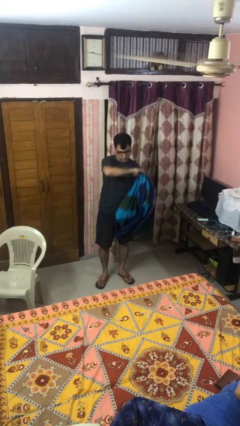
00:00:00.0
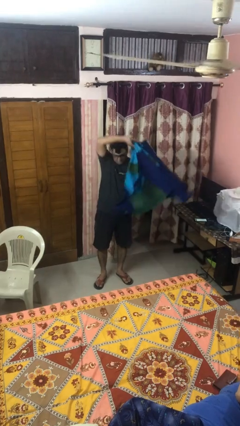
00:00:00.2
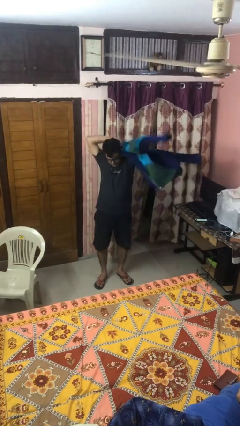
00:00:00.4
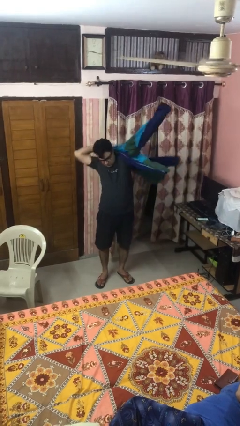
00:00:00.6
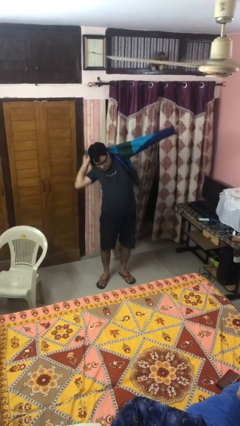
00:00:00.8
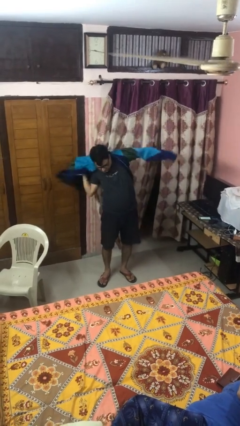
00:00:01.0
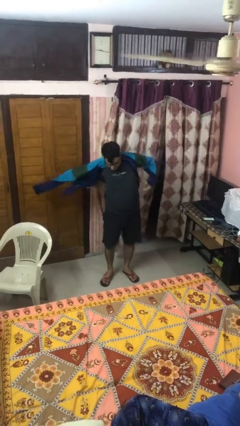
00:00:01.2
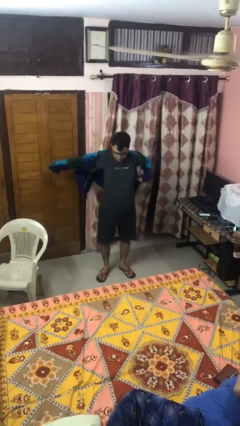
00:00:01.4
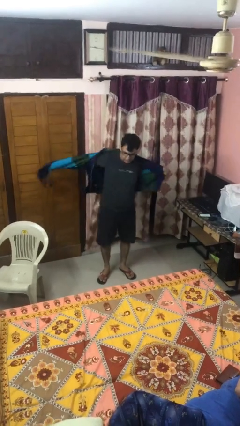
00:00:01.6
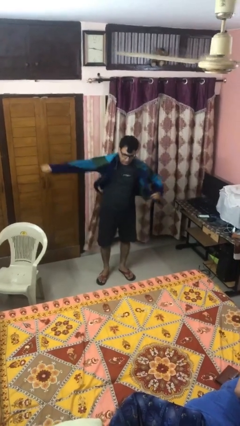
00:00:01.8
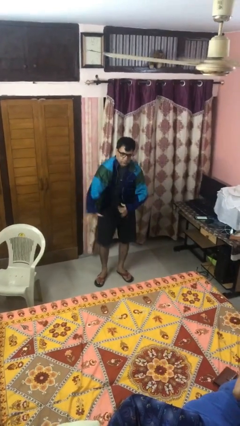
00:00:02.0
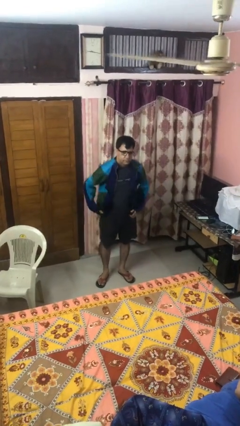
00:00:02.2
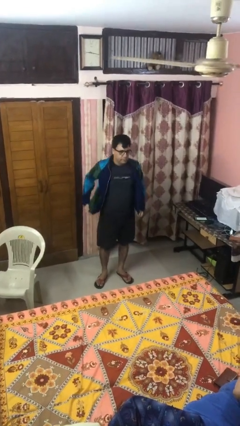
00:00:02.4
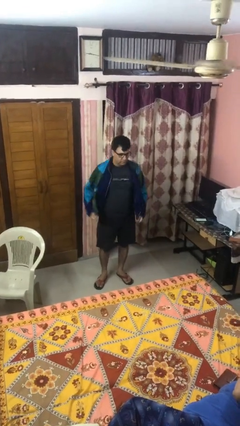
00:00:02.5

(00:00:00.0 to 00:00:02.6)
person puts on jacket

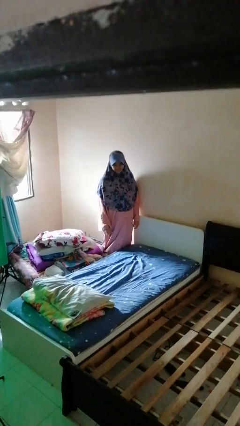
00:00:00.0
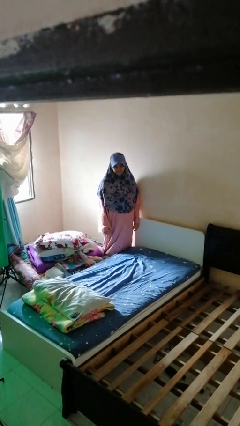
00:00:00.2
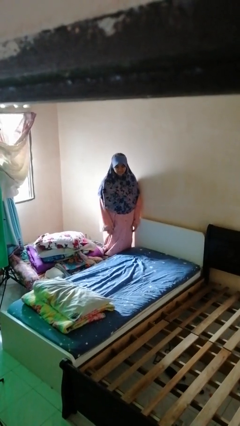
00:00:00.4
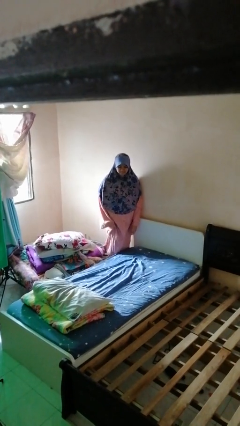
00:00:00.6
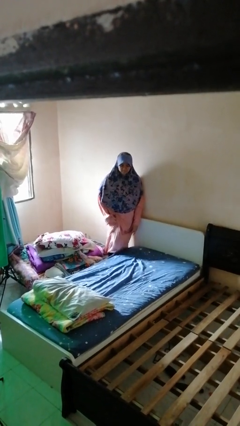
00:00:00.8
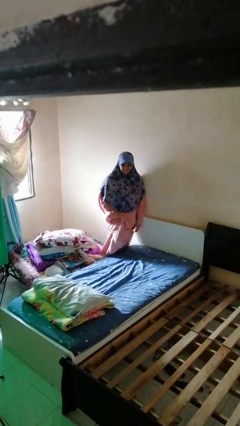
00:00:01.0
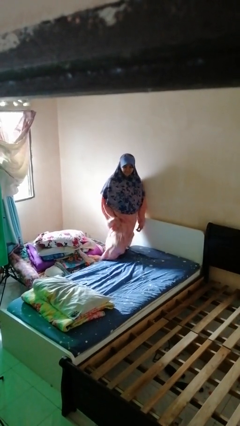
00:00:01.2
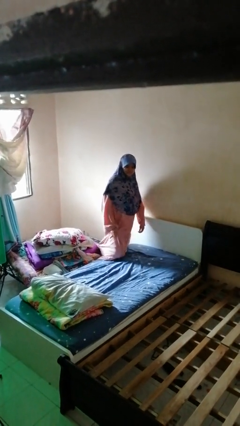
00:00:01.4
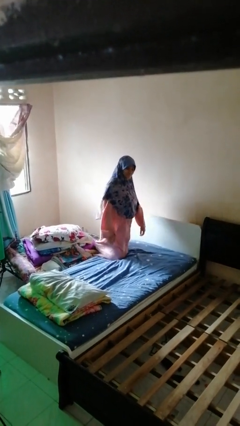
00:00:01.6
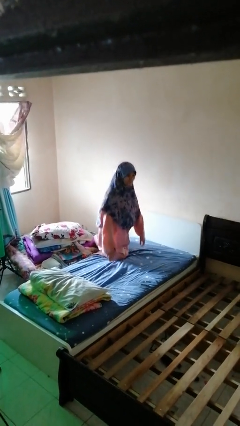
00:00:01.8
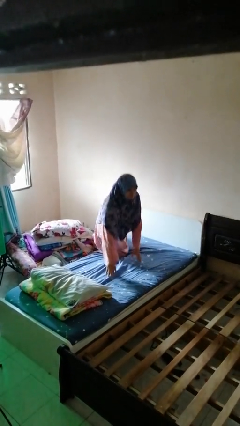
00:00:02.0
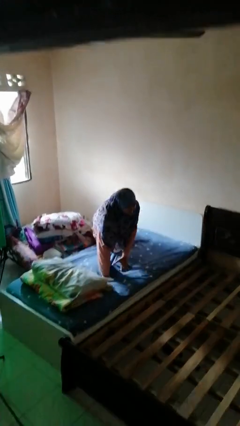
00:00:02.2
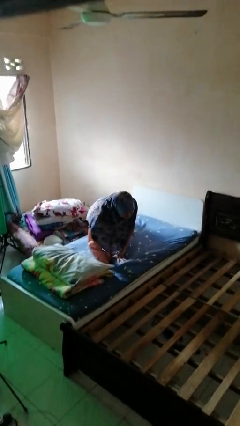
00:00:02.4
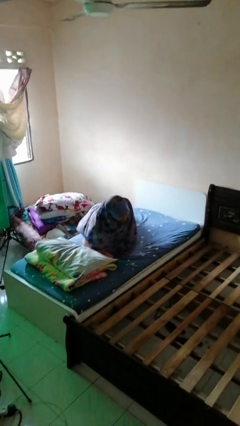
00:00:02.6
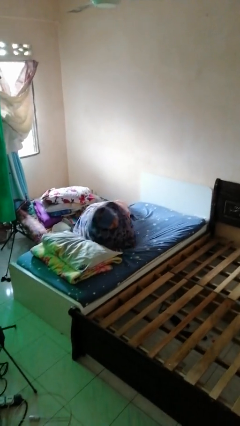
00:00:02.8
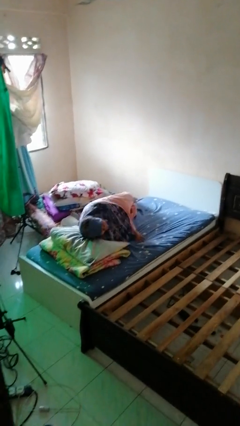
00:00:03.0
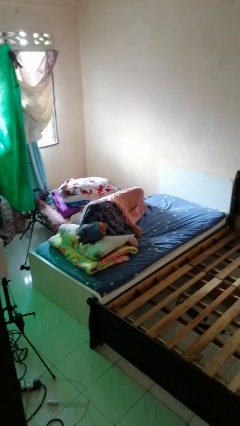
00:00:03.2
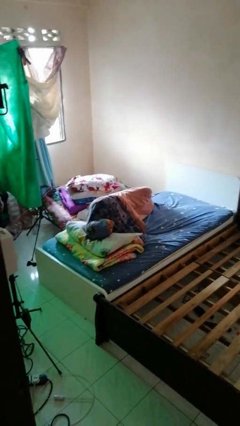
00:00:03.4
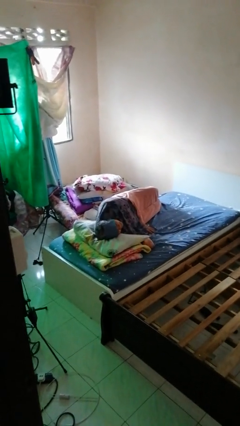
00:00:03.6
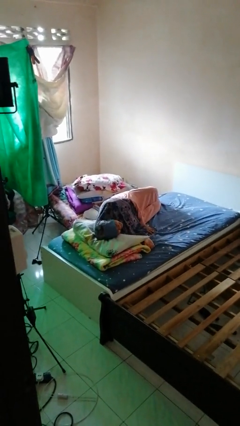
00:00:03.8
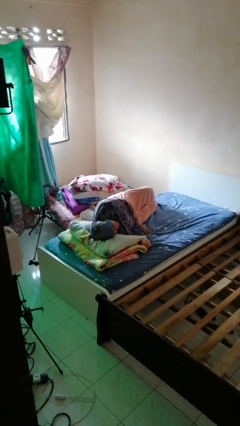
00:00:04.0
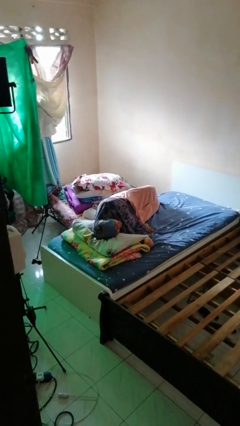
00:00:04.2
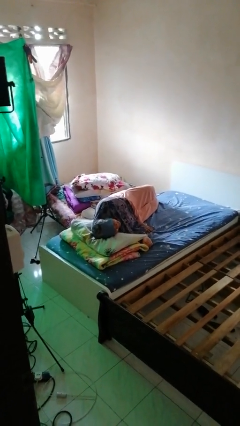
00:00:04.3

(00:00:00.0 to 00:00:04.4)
person lies down on bed

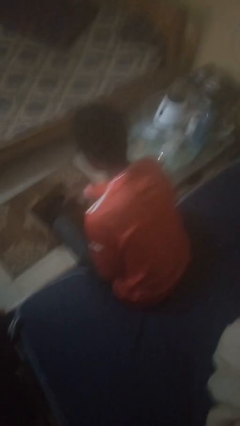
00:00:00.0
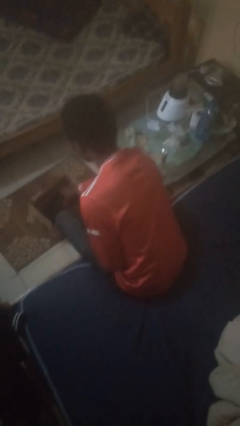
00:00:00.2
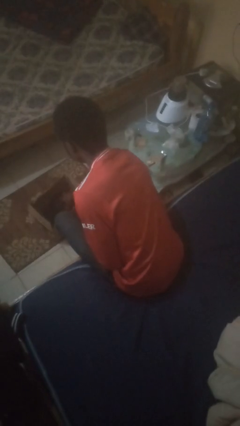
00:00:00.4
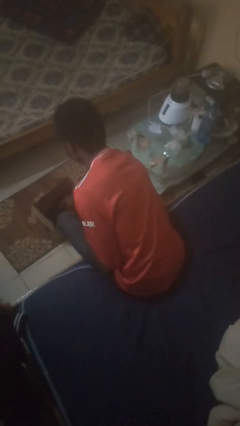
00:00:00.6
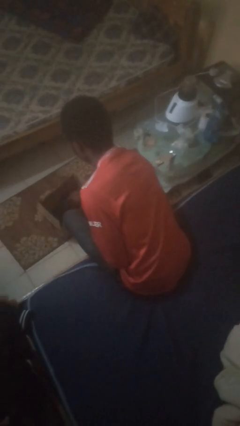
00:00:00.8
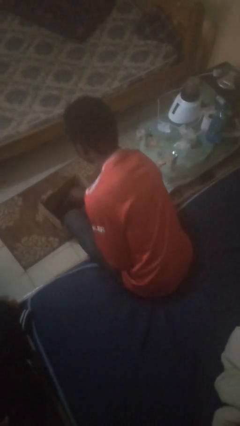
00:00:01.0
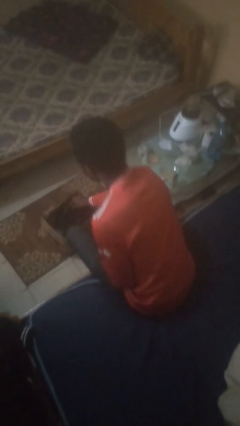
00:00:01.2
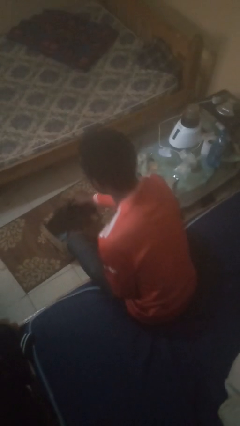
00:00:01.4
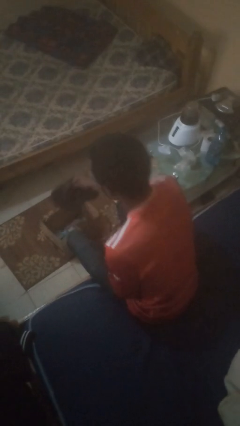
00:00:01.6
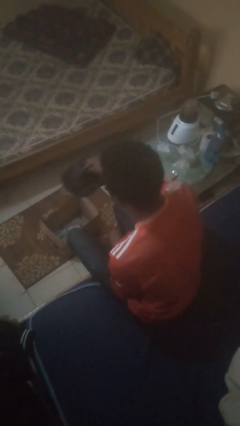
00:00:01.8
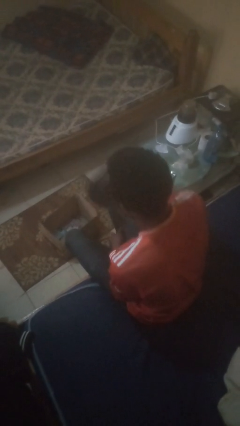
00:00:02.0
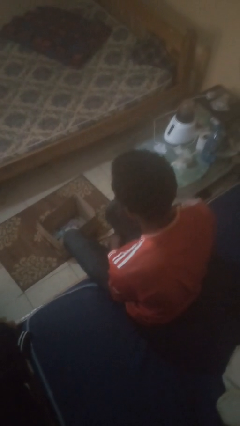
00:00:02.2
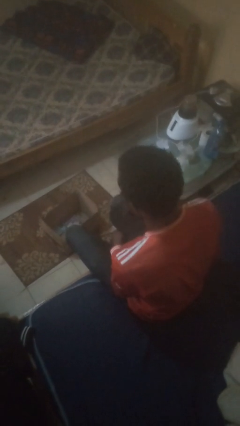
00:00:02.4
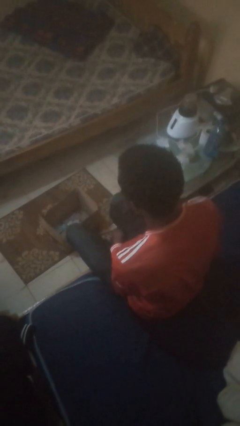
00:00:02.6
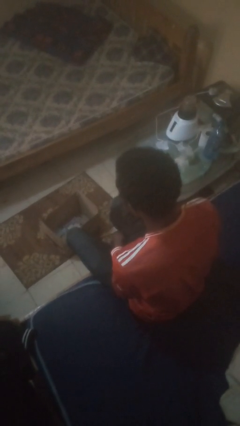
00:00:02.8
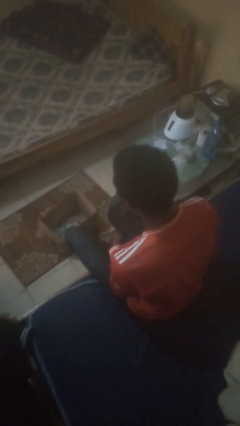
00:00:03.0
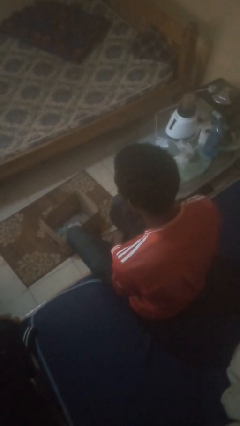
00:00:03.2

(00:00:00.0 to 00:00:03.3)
person takes object from box

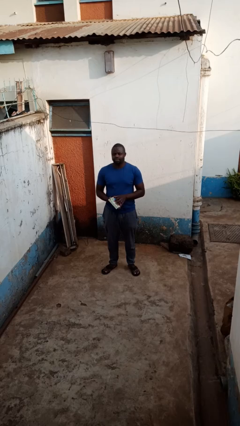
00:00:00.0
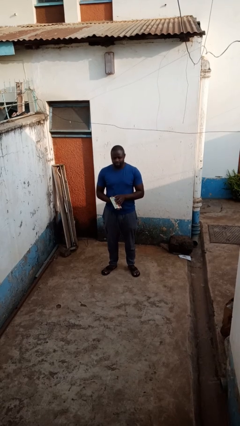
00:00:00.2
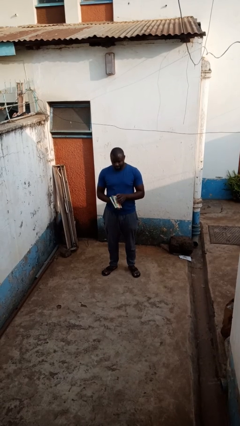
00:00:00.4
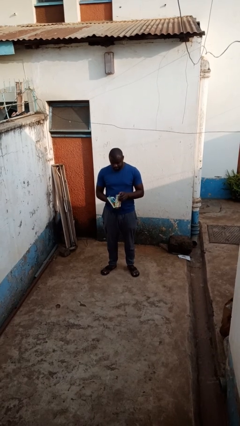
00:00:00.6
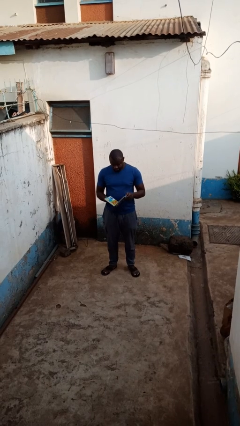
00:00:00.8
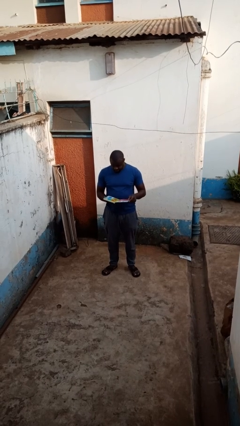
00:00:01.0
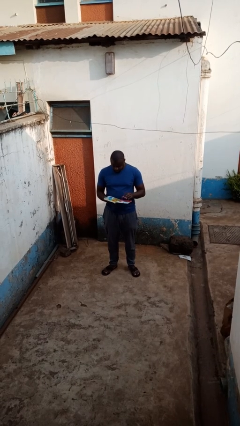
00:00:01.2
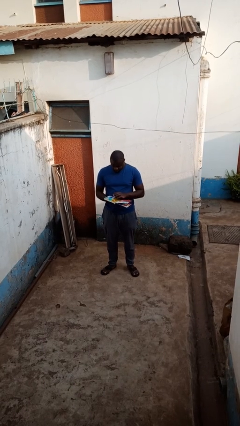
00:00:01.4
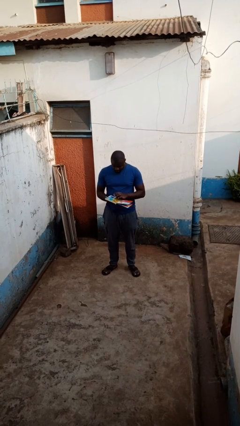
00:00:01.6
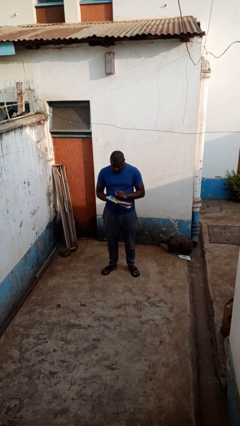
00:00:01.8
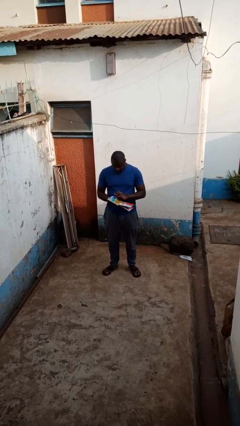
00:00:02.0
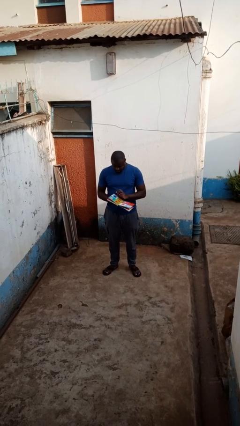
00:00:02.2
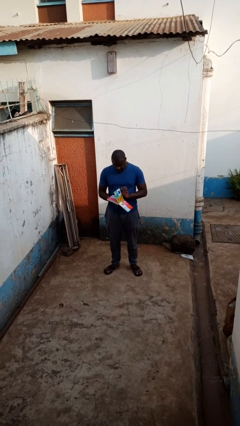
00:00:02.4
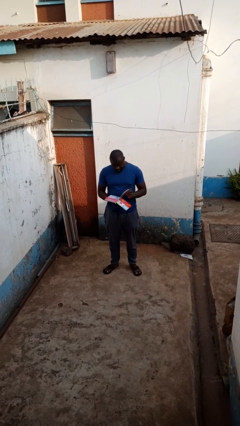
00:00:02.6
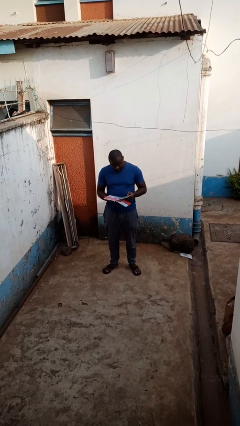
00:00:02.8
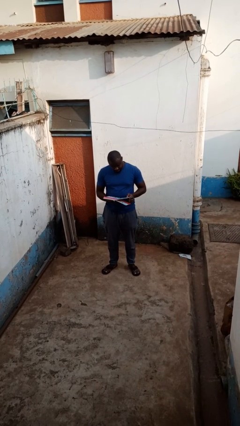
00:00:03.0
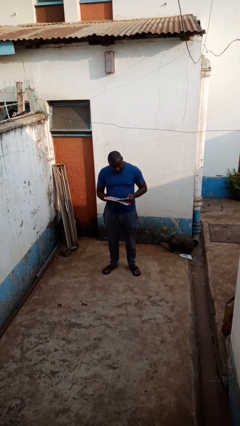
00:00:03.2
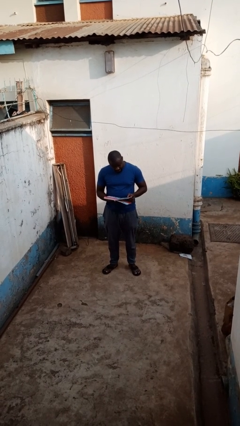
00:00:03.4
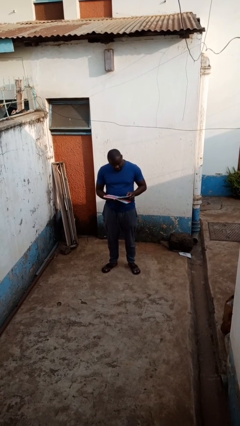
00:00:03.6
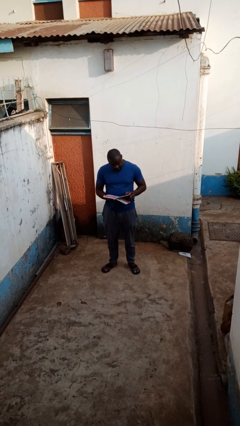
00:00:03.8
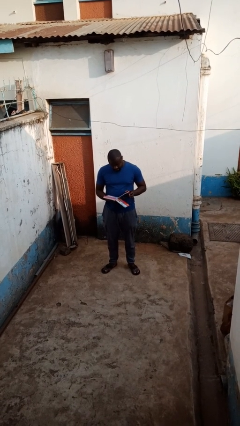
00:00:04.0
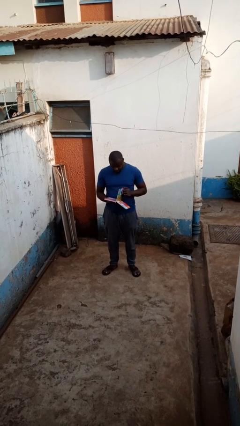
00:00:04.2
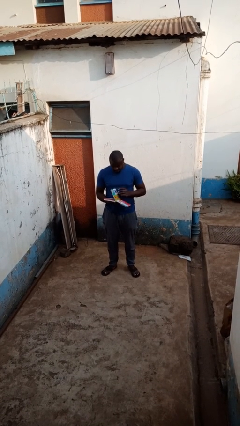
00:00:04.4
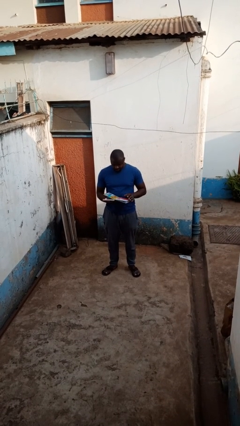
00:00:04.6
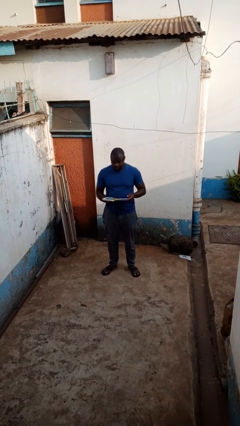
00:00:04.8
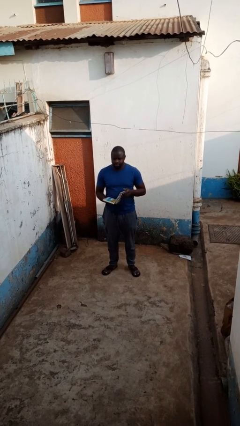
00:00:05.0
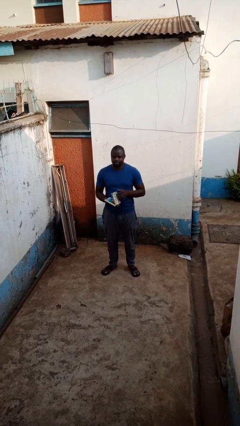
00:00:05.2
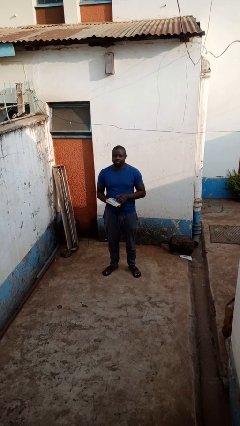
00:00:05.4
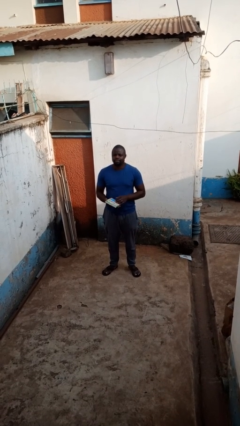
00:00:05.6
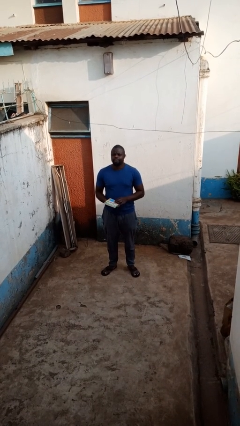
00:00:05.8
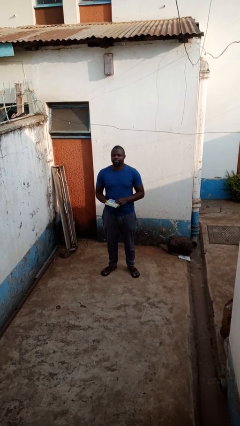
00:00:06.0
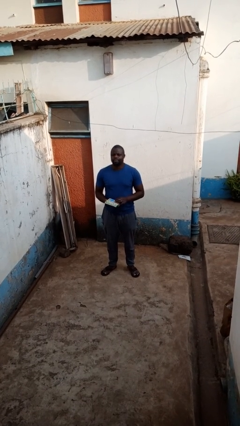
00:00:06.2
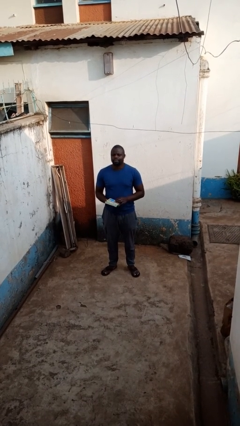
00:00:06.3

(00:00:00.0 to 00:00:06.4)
person reads book

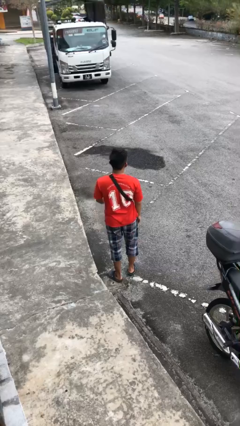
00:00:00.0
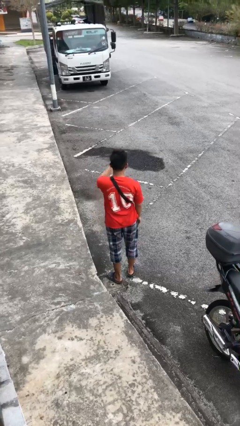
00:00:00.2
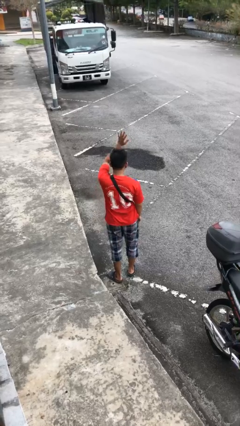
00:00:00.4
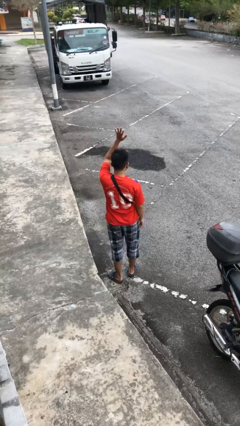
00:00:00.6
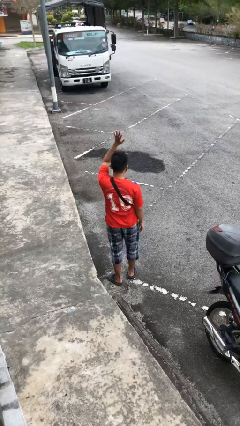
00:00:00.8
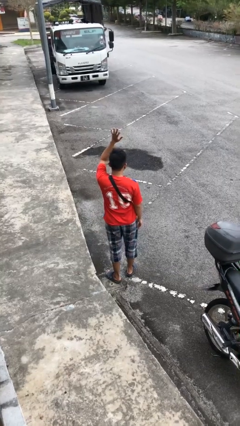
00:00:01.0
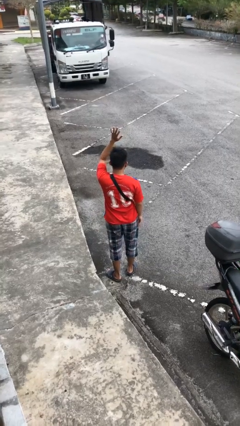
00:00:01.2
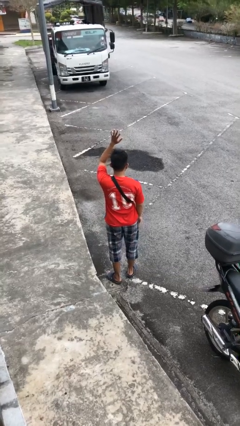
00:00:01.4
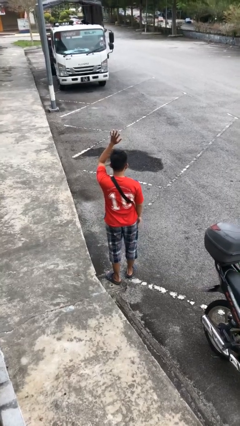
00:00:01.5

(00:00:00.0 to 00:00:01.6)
person gestures raise hand
